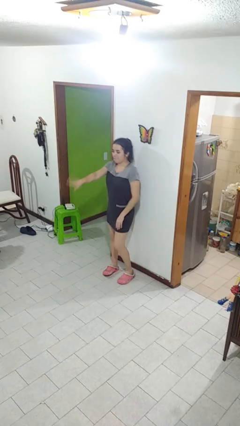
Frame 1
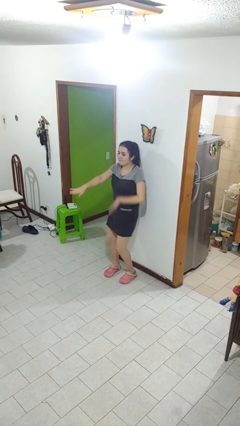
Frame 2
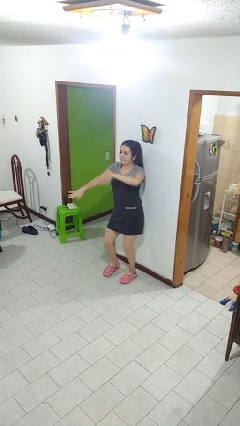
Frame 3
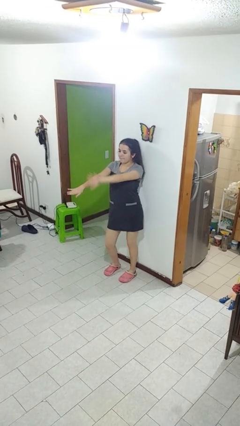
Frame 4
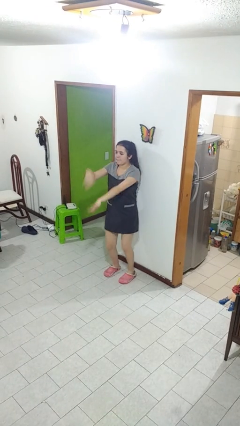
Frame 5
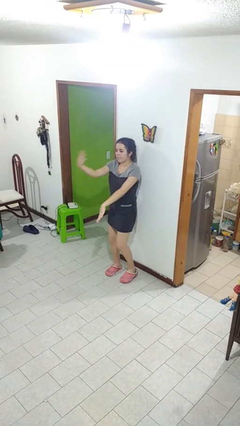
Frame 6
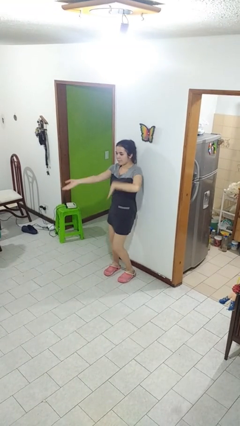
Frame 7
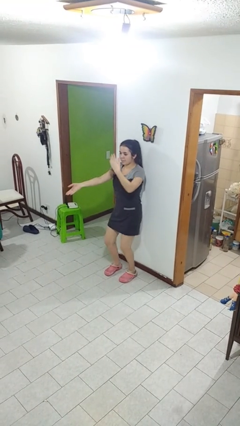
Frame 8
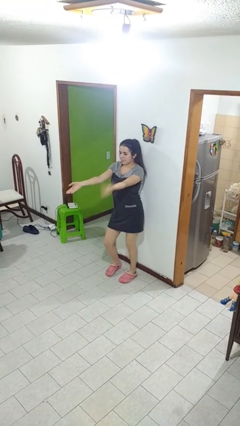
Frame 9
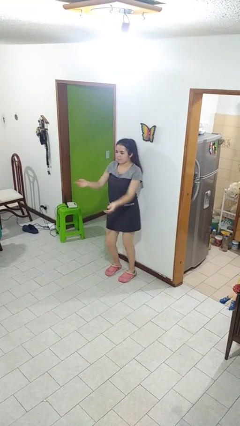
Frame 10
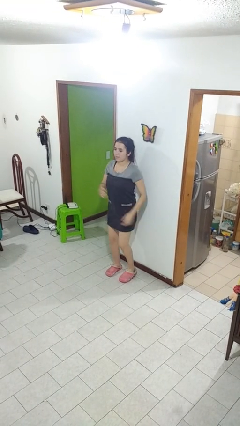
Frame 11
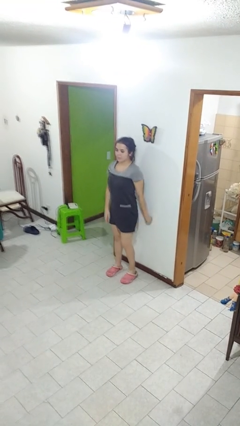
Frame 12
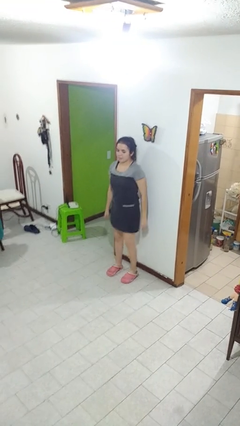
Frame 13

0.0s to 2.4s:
person dances in place

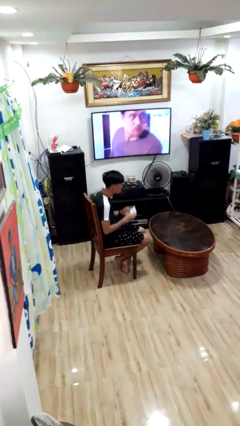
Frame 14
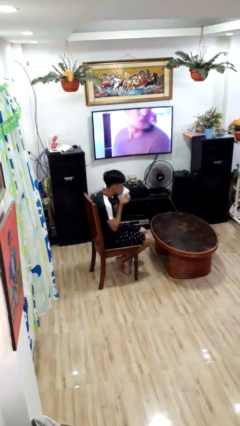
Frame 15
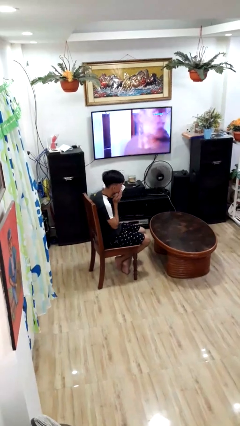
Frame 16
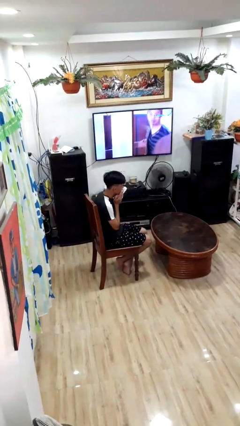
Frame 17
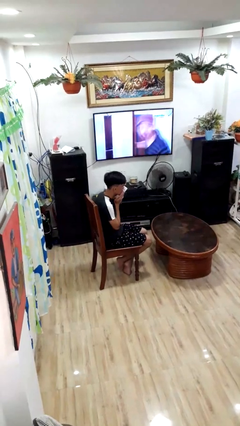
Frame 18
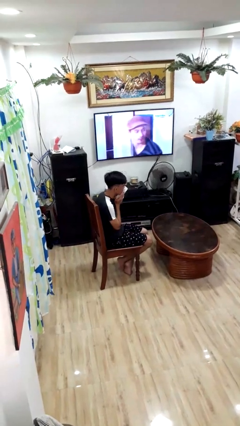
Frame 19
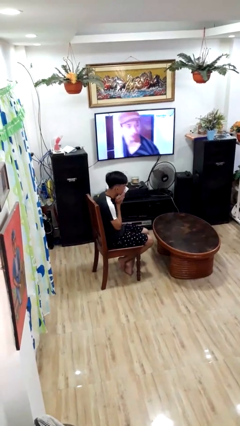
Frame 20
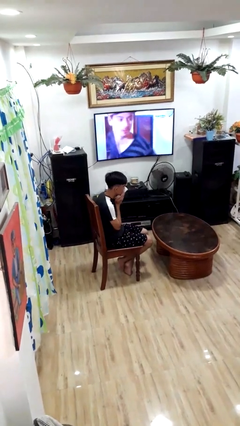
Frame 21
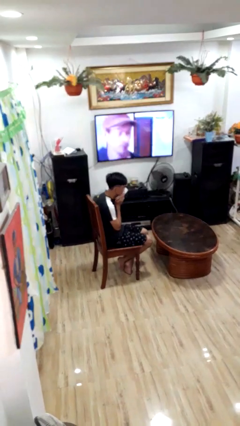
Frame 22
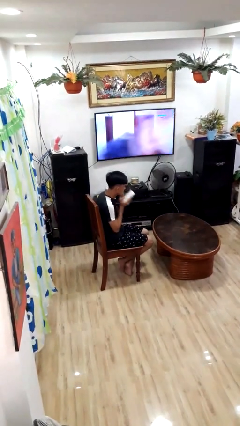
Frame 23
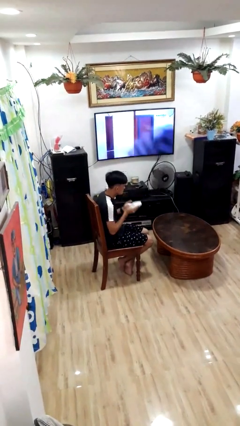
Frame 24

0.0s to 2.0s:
person wipes mouth with napkin

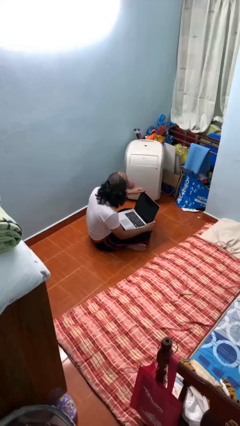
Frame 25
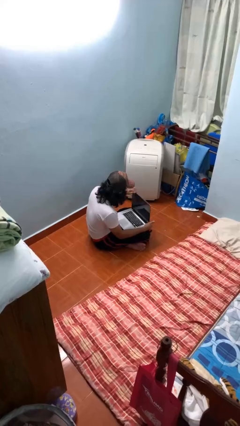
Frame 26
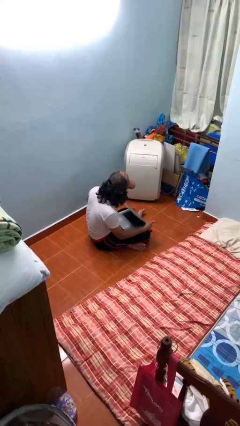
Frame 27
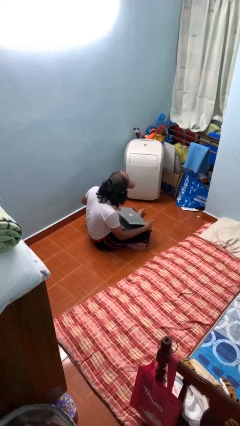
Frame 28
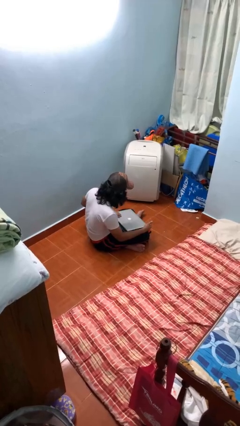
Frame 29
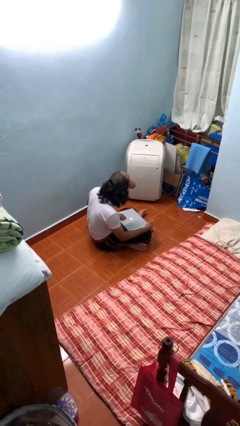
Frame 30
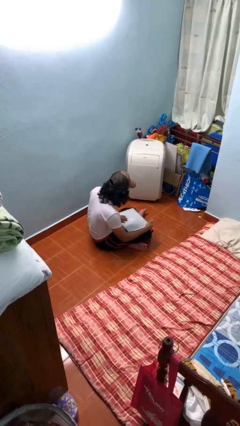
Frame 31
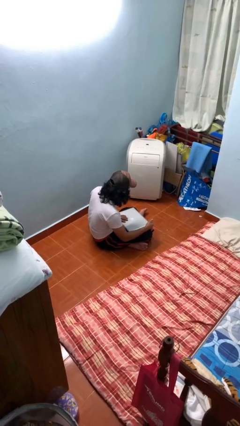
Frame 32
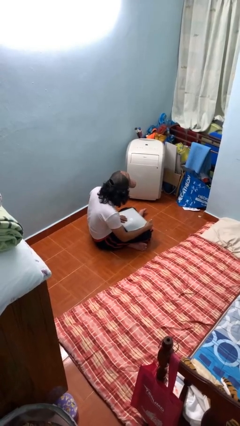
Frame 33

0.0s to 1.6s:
person closes laptop

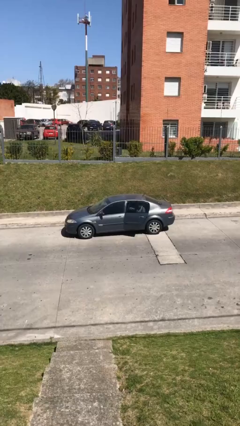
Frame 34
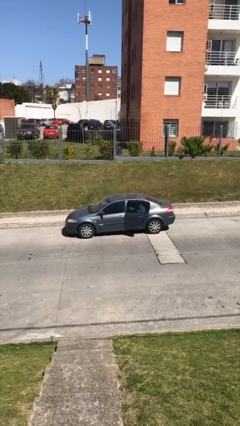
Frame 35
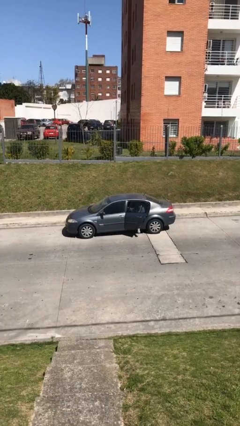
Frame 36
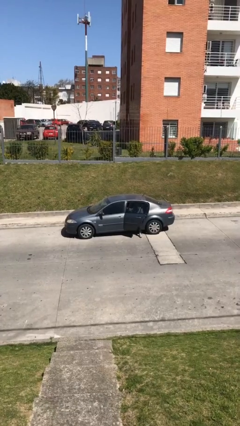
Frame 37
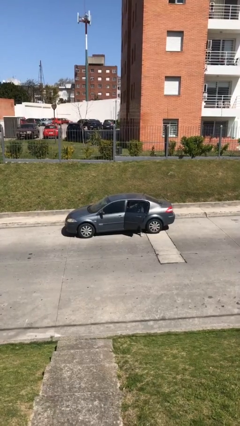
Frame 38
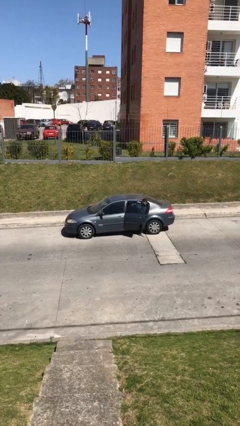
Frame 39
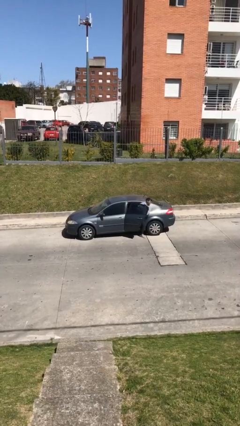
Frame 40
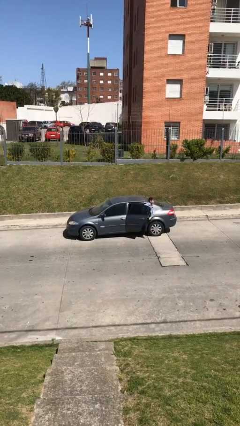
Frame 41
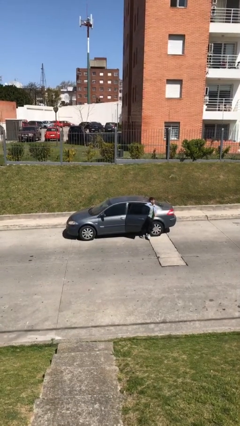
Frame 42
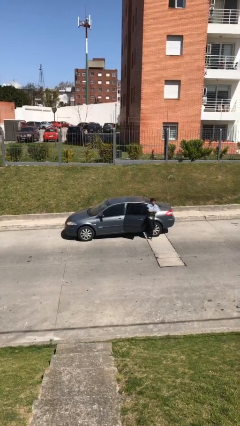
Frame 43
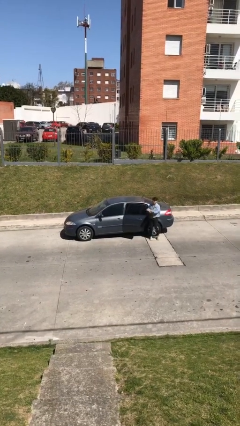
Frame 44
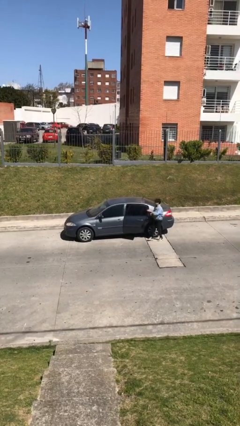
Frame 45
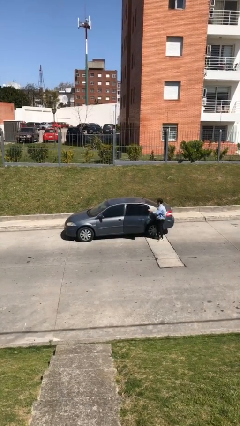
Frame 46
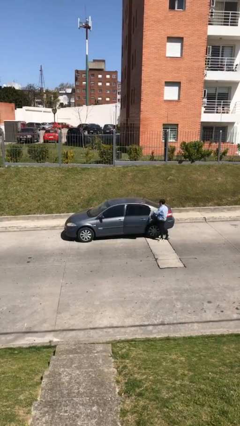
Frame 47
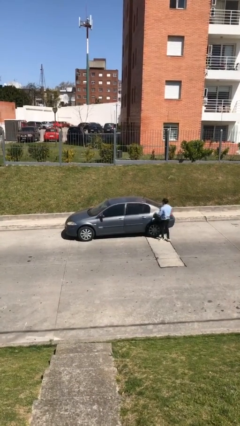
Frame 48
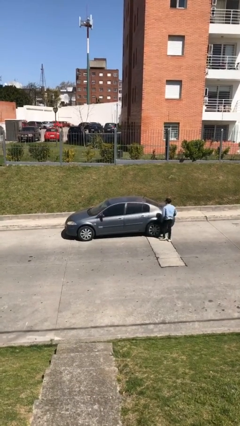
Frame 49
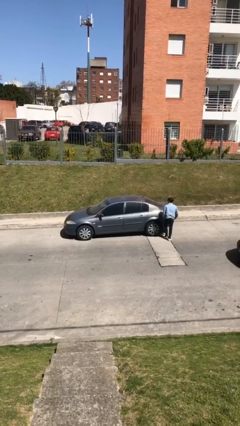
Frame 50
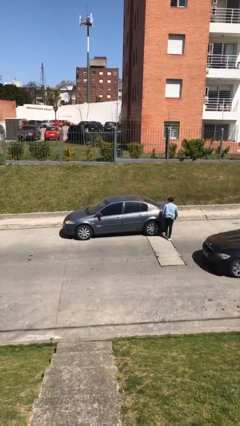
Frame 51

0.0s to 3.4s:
car drops off person

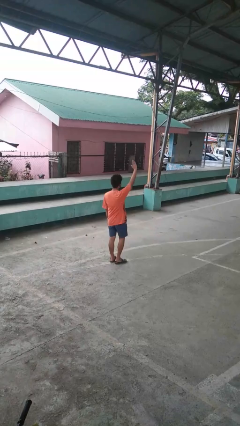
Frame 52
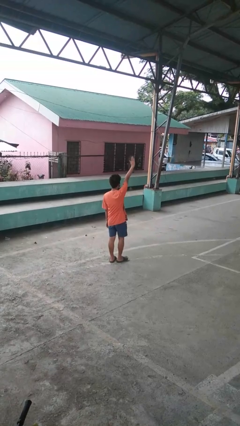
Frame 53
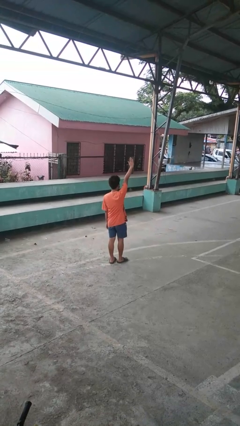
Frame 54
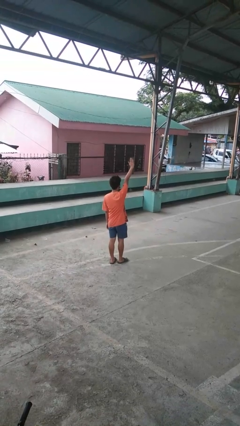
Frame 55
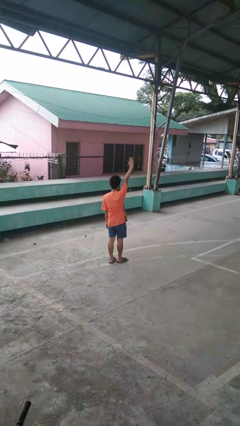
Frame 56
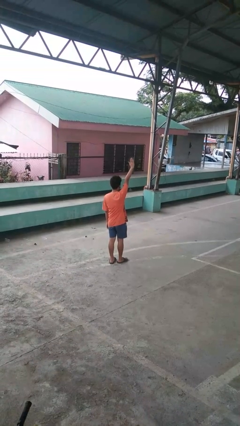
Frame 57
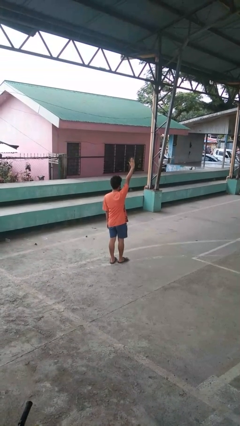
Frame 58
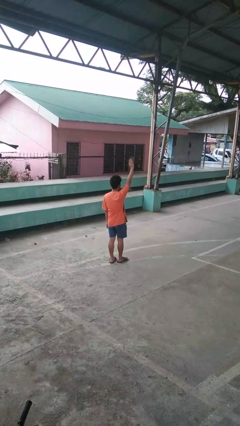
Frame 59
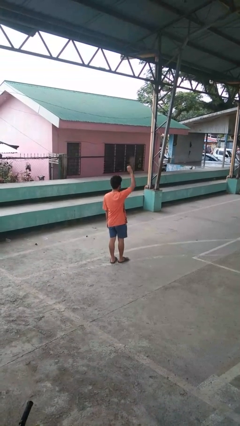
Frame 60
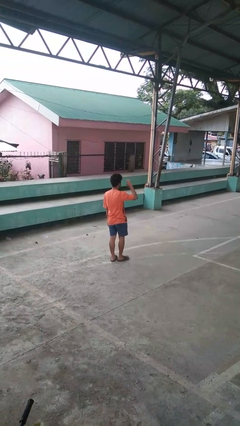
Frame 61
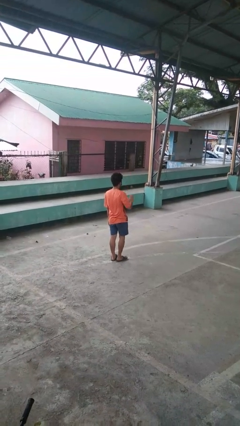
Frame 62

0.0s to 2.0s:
person gestures raise hand

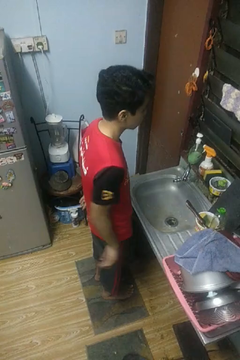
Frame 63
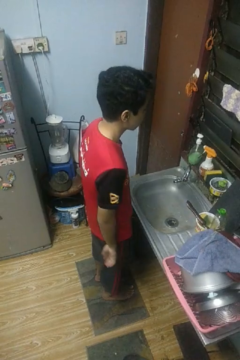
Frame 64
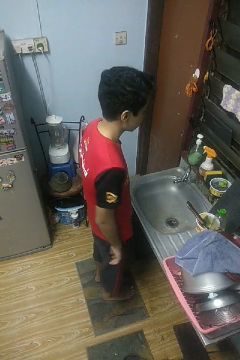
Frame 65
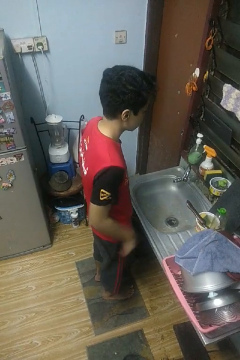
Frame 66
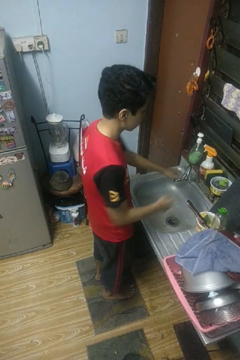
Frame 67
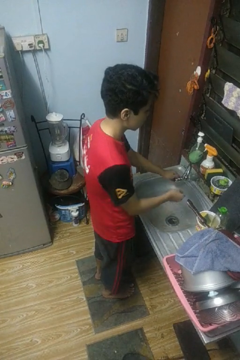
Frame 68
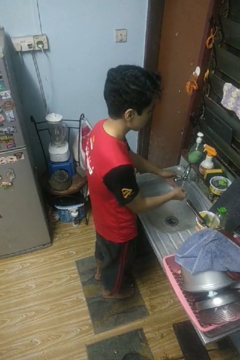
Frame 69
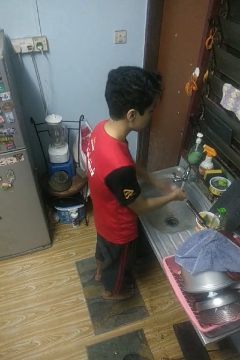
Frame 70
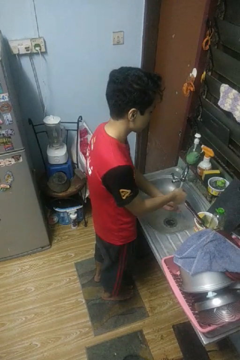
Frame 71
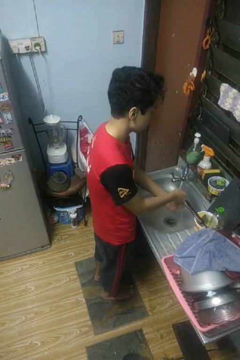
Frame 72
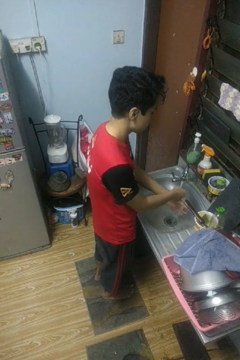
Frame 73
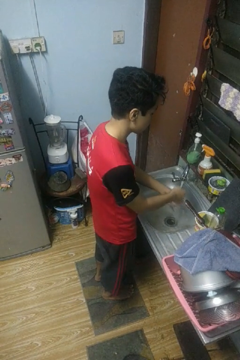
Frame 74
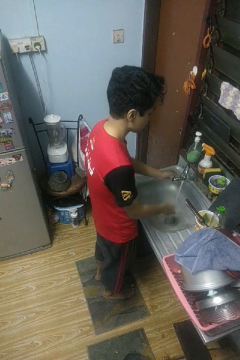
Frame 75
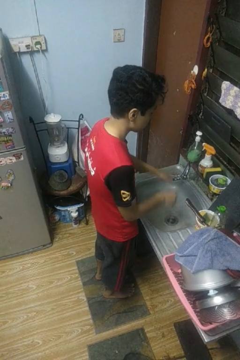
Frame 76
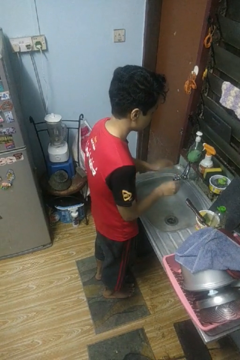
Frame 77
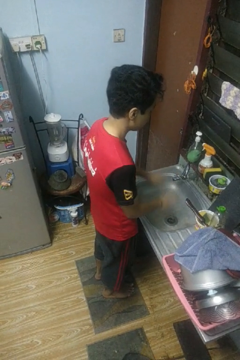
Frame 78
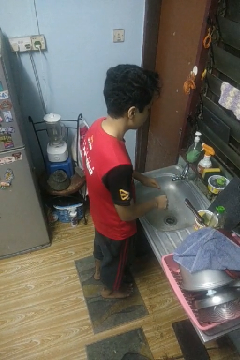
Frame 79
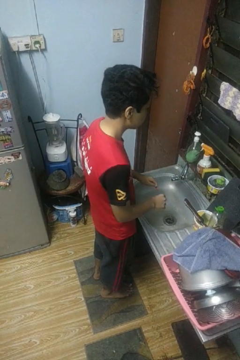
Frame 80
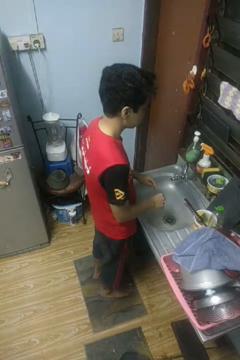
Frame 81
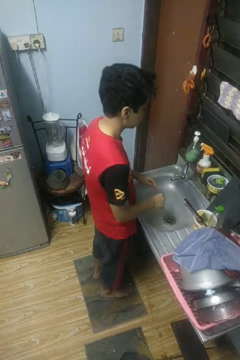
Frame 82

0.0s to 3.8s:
person washes hands

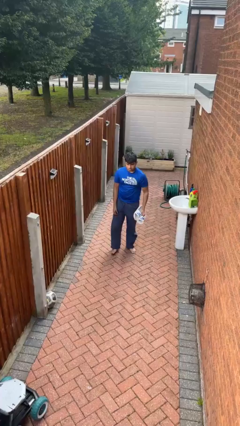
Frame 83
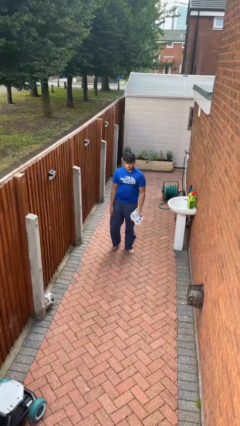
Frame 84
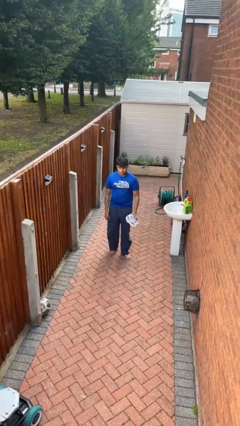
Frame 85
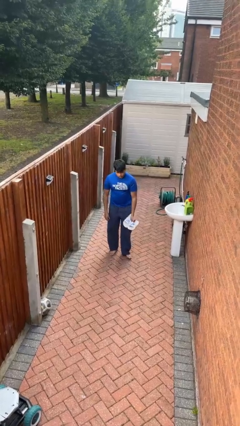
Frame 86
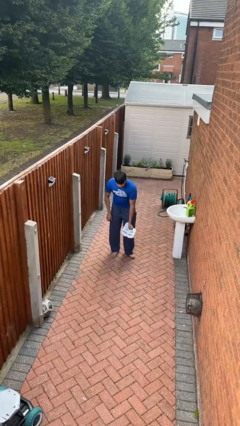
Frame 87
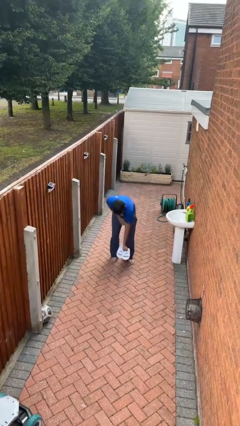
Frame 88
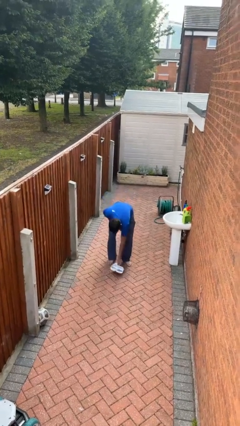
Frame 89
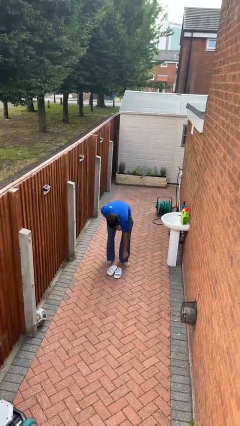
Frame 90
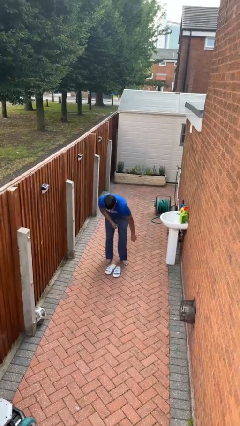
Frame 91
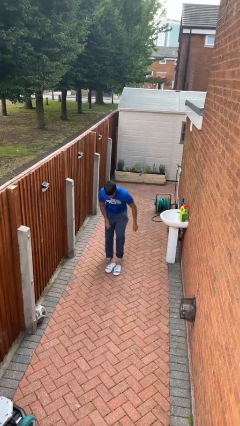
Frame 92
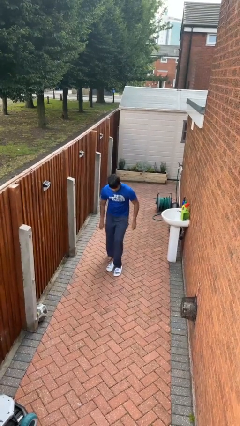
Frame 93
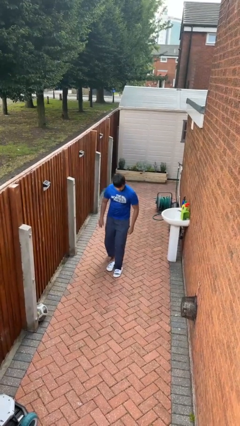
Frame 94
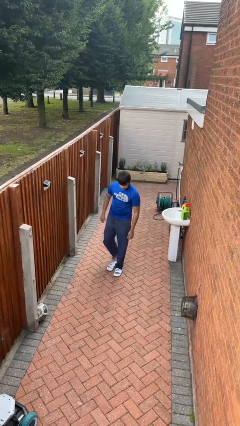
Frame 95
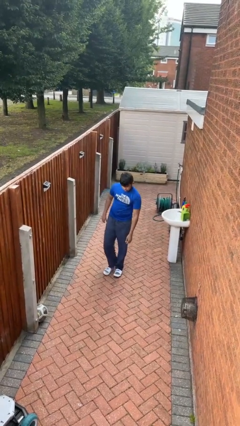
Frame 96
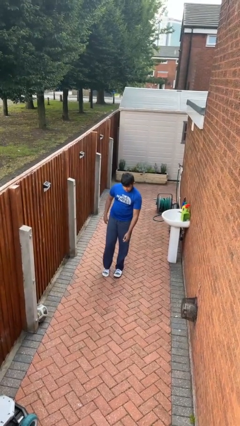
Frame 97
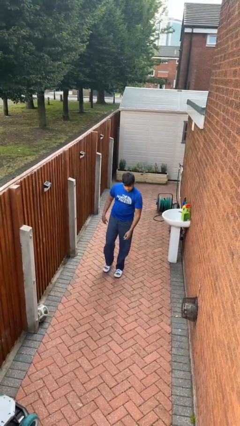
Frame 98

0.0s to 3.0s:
person puts on shoes
